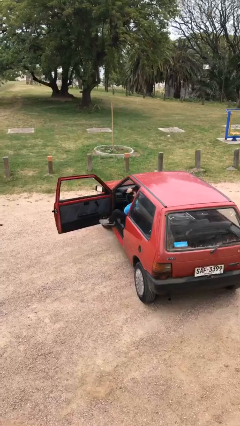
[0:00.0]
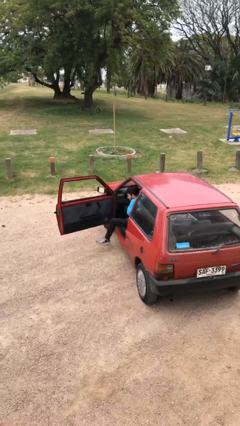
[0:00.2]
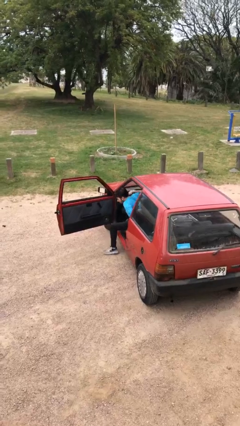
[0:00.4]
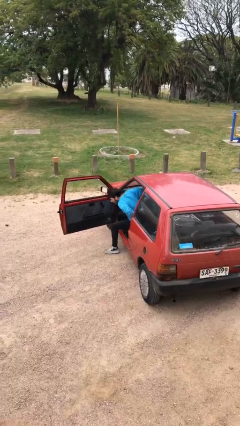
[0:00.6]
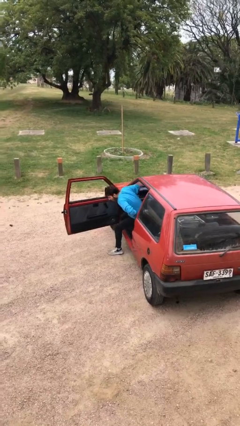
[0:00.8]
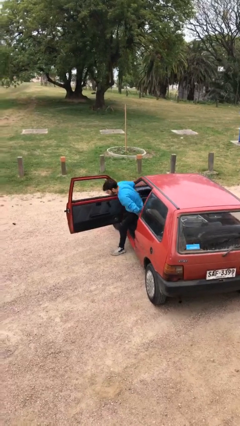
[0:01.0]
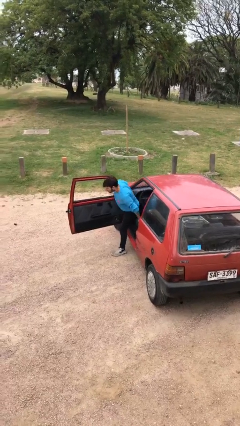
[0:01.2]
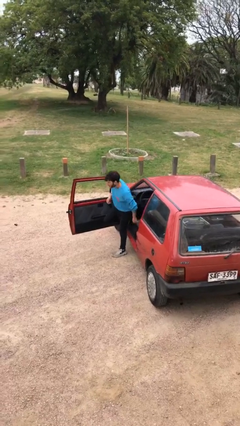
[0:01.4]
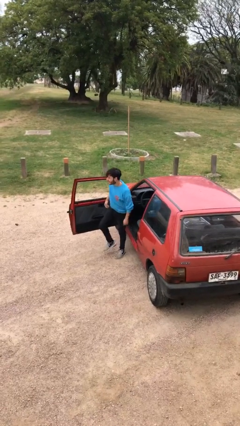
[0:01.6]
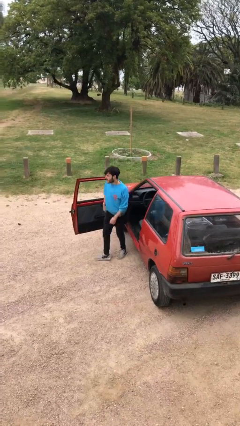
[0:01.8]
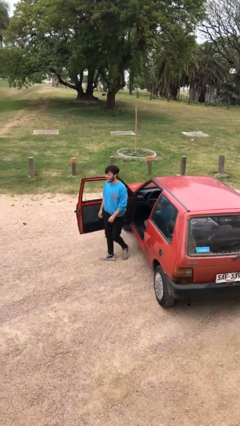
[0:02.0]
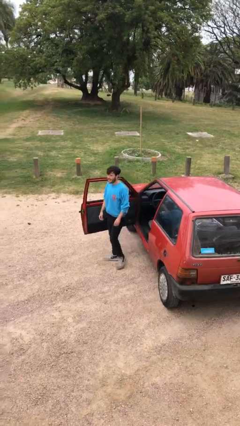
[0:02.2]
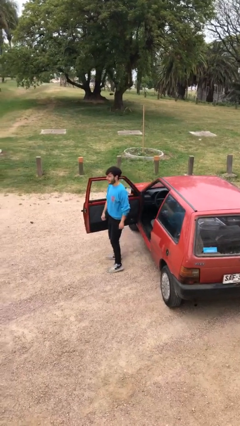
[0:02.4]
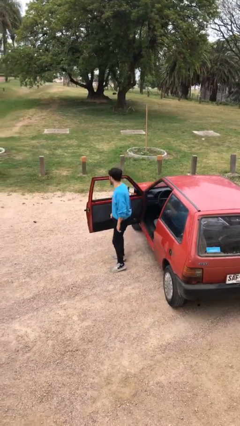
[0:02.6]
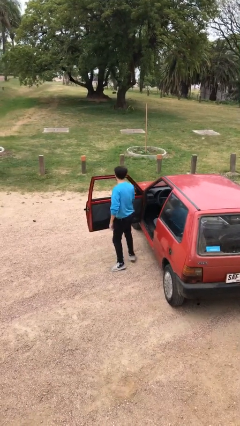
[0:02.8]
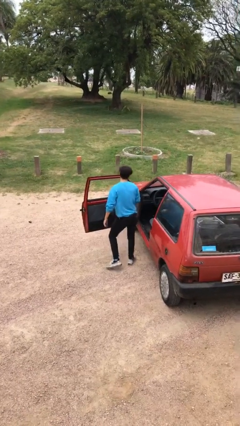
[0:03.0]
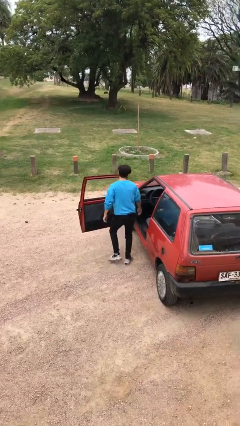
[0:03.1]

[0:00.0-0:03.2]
person exits car

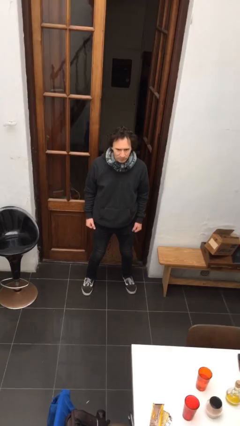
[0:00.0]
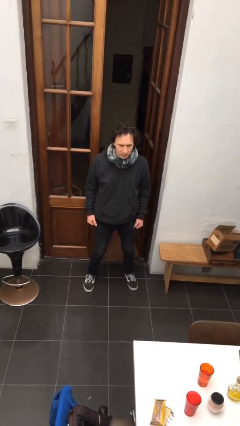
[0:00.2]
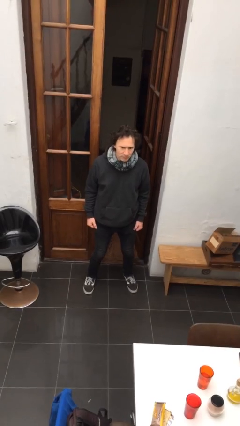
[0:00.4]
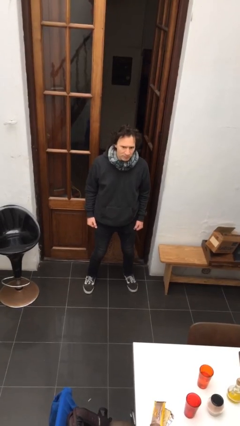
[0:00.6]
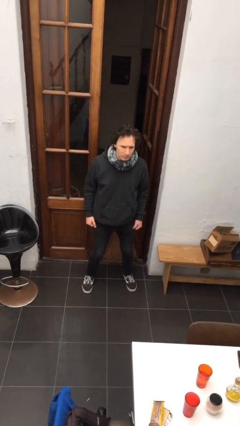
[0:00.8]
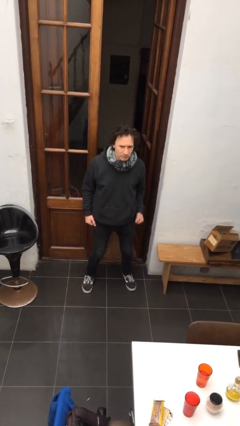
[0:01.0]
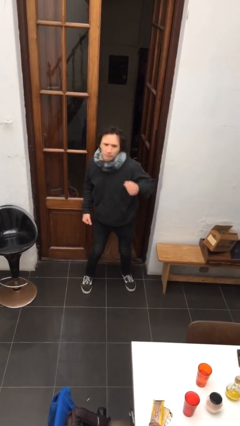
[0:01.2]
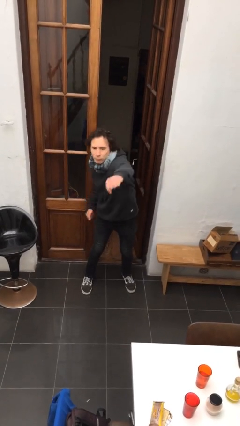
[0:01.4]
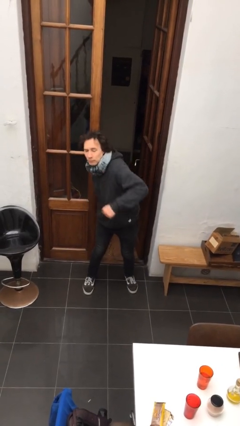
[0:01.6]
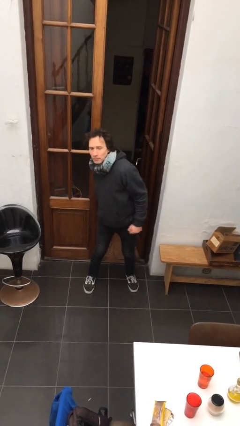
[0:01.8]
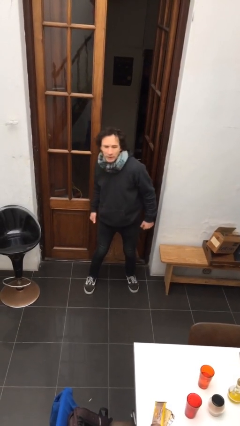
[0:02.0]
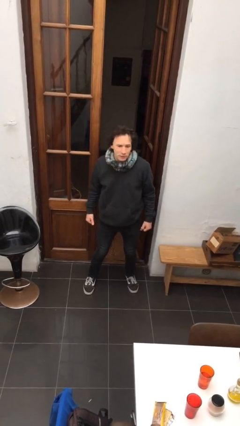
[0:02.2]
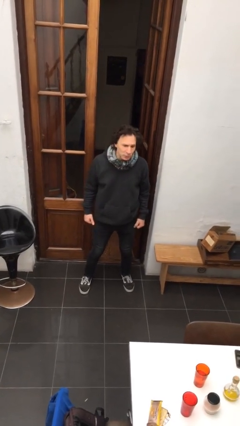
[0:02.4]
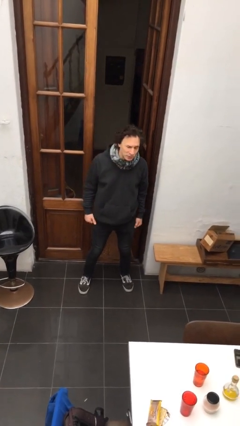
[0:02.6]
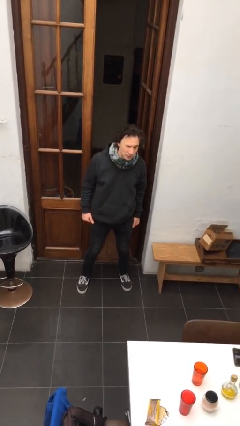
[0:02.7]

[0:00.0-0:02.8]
person punches

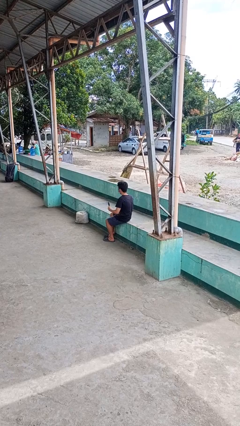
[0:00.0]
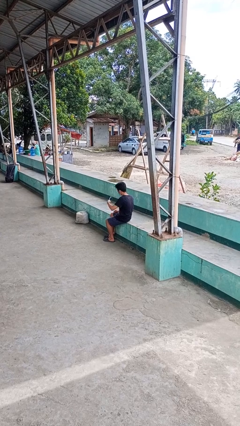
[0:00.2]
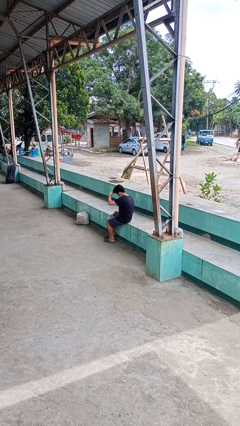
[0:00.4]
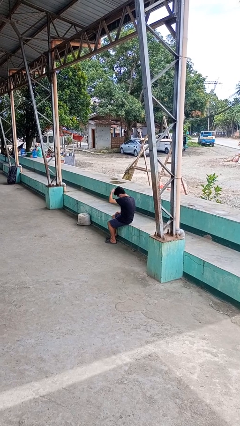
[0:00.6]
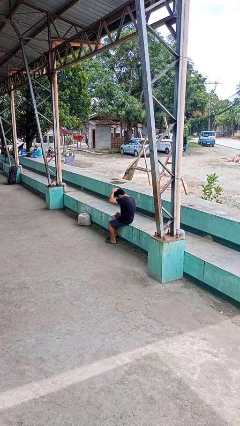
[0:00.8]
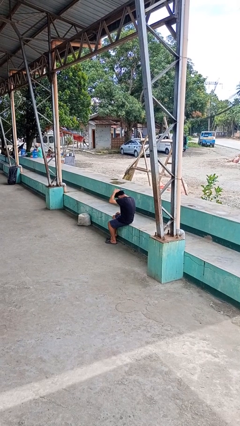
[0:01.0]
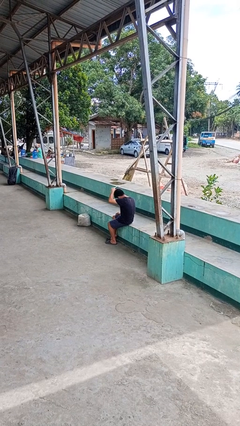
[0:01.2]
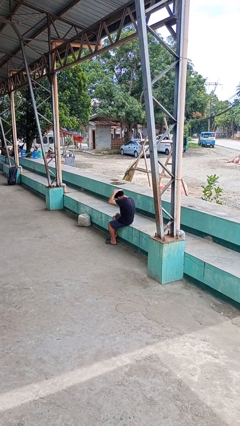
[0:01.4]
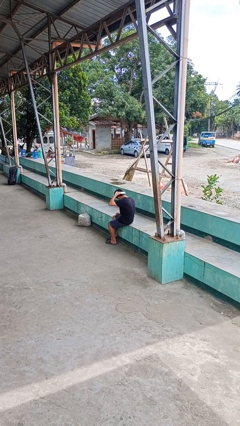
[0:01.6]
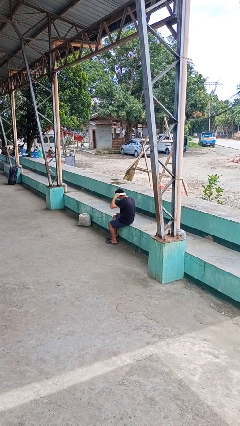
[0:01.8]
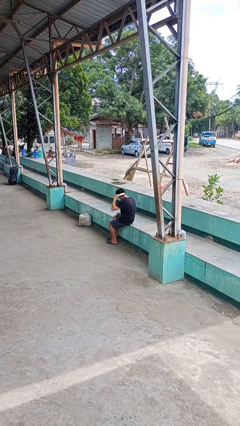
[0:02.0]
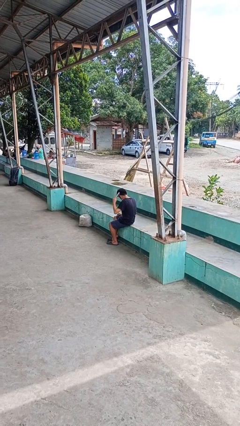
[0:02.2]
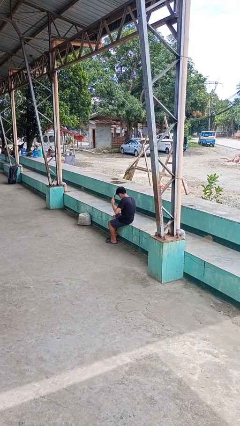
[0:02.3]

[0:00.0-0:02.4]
person brushes hair

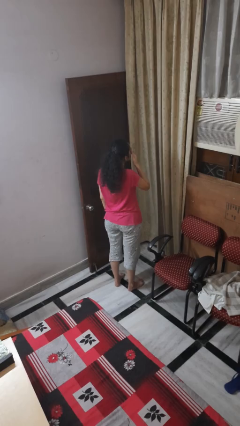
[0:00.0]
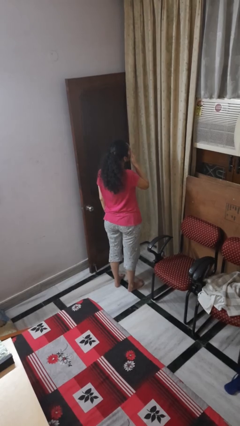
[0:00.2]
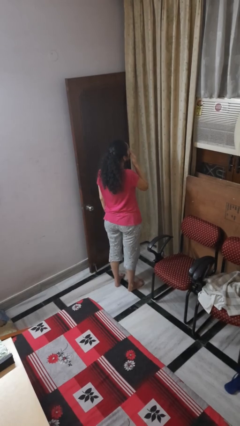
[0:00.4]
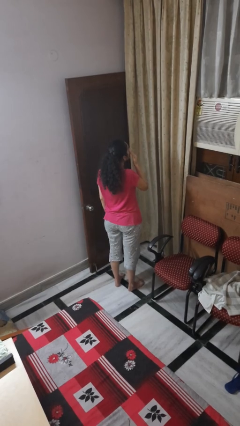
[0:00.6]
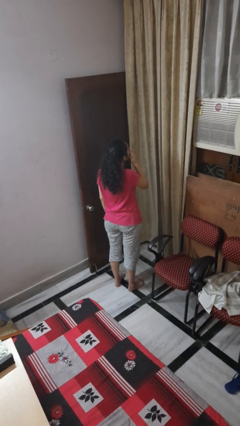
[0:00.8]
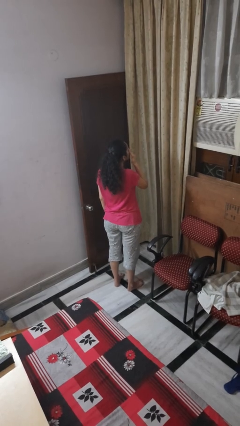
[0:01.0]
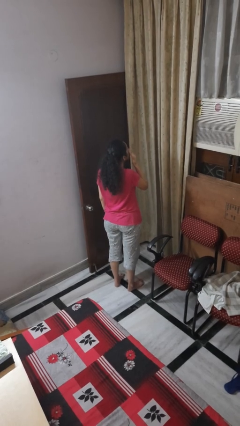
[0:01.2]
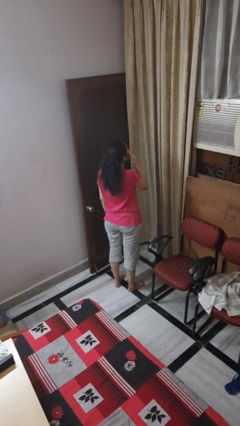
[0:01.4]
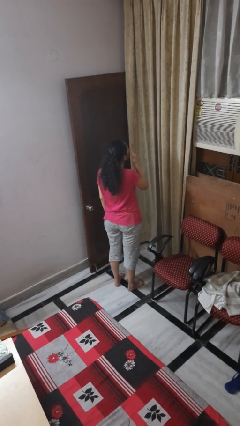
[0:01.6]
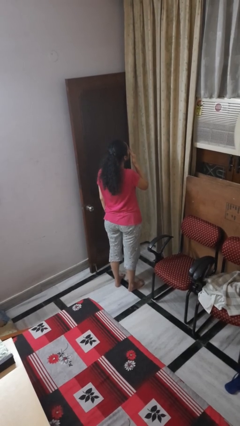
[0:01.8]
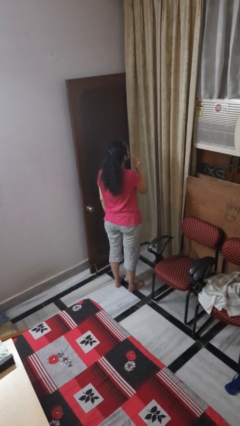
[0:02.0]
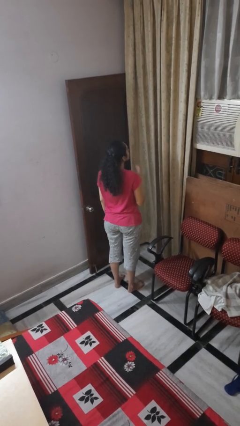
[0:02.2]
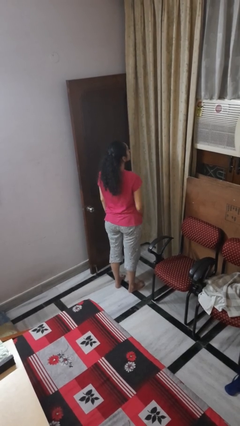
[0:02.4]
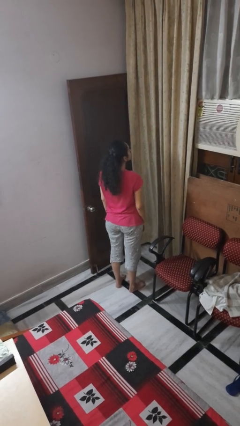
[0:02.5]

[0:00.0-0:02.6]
person rubs eyes

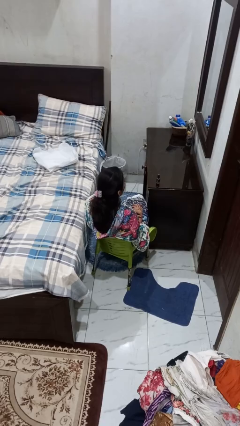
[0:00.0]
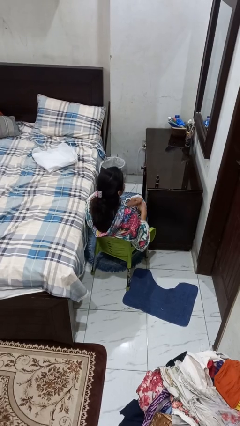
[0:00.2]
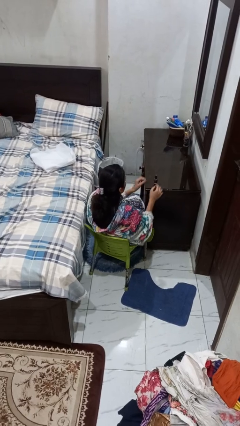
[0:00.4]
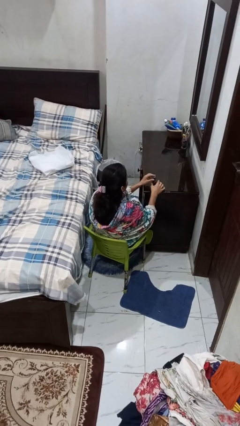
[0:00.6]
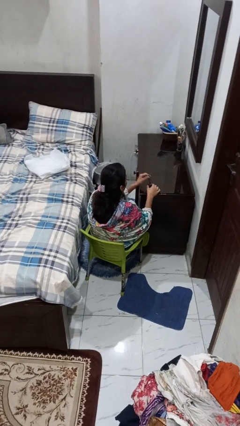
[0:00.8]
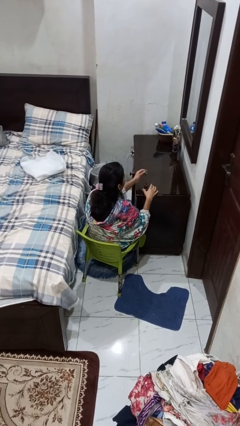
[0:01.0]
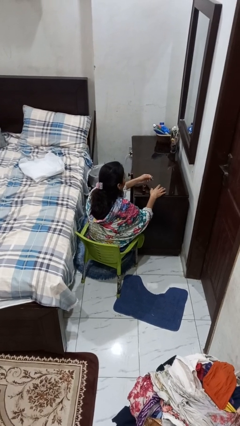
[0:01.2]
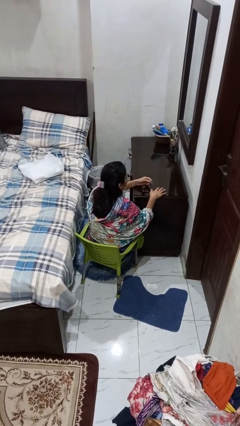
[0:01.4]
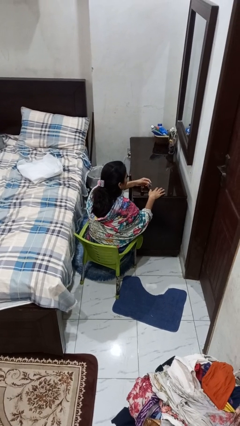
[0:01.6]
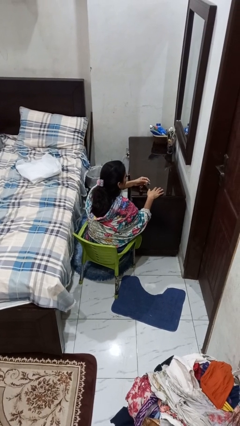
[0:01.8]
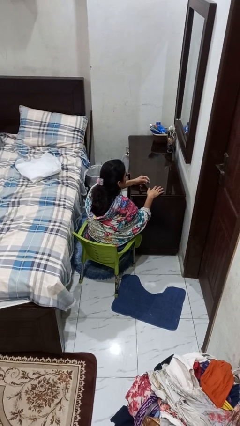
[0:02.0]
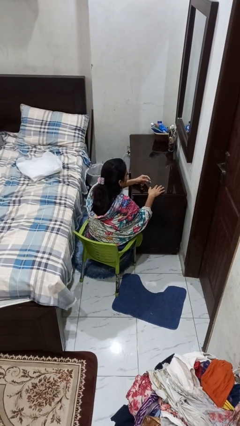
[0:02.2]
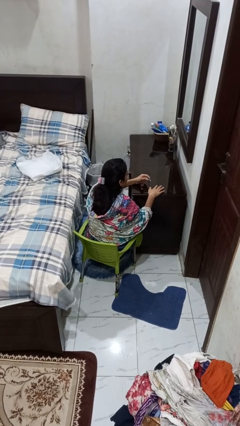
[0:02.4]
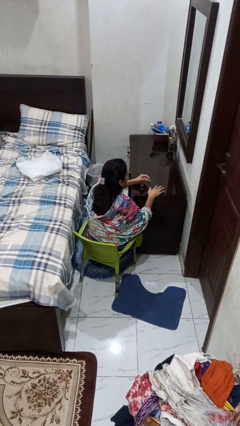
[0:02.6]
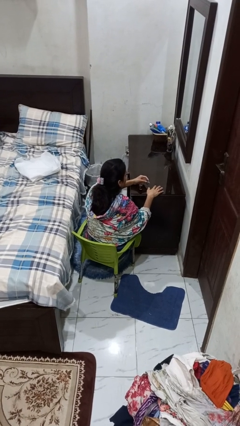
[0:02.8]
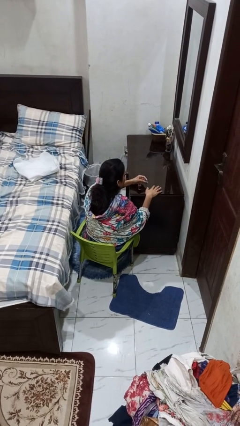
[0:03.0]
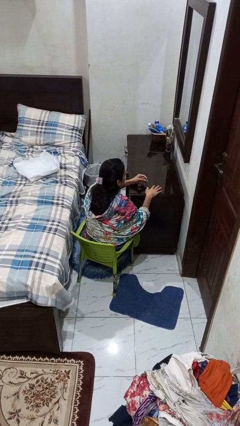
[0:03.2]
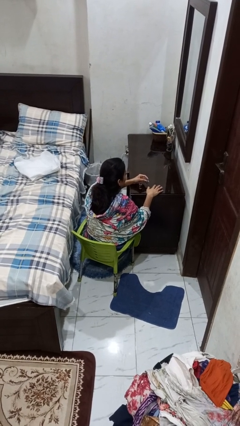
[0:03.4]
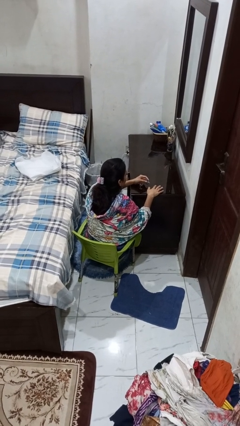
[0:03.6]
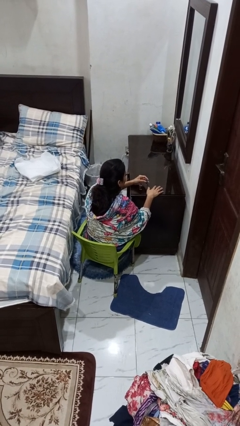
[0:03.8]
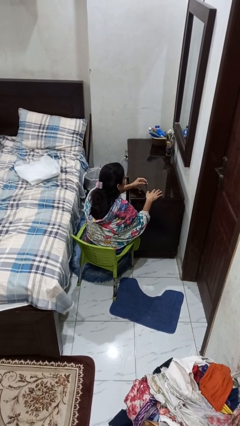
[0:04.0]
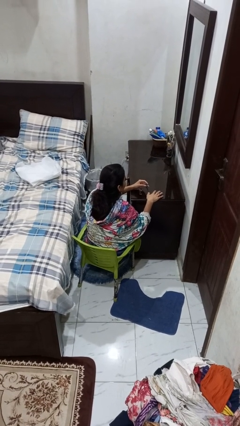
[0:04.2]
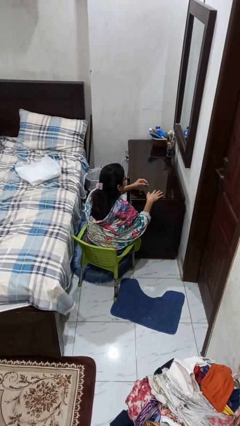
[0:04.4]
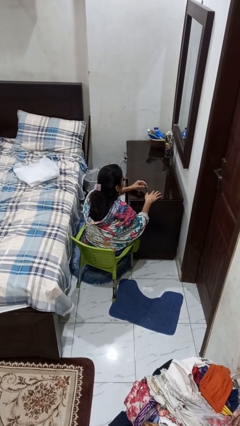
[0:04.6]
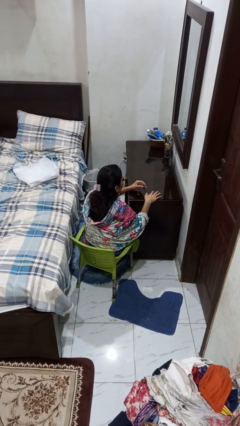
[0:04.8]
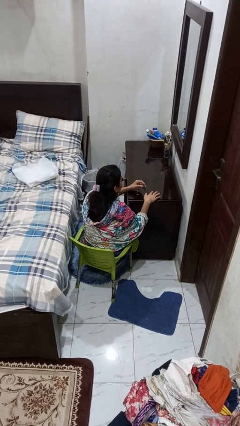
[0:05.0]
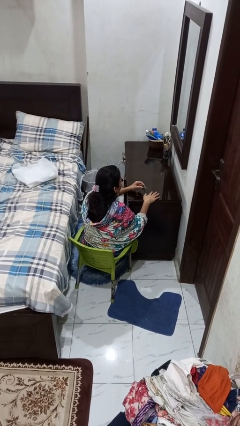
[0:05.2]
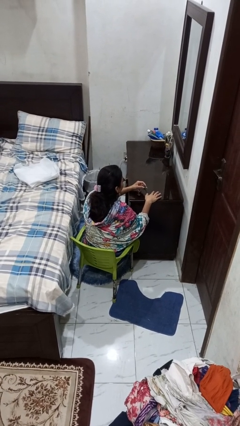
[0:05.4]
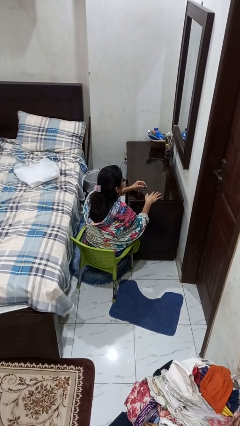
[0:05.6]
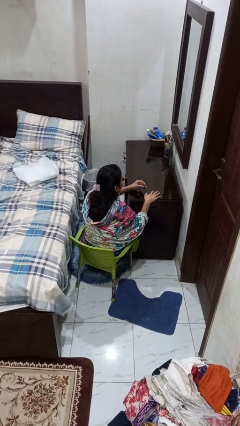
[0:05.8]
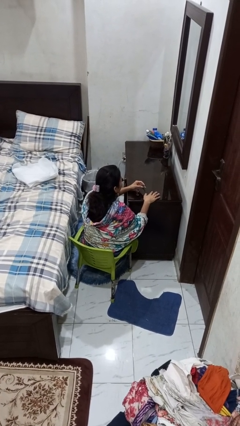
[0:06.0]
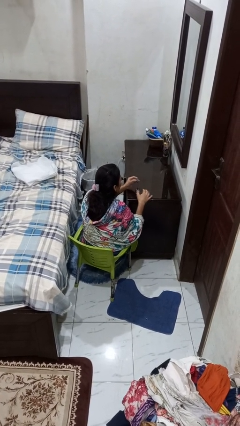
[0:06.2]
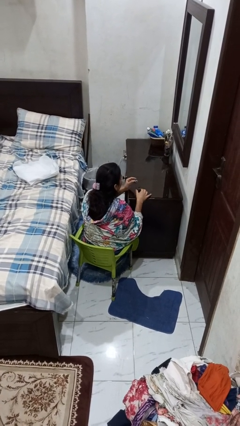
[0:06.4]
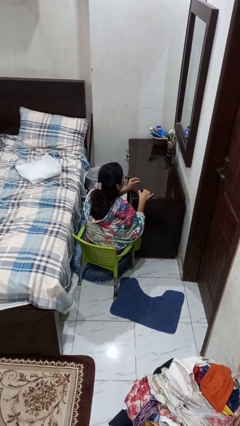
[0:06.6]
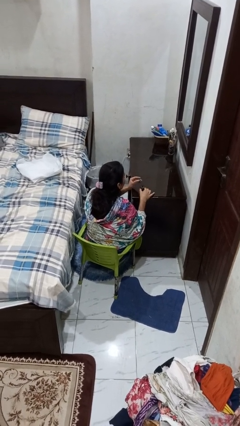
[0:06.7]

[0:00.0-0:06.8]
person paints fingernails

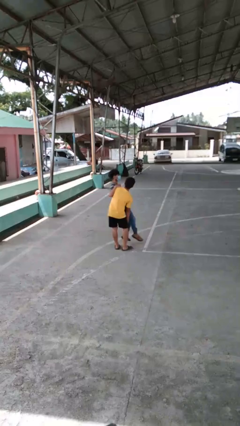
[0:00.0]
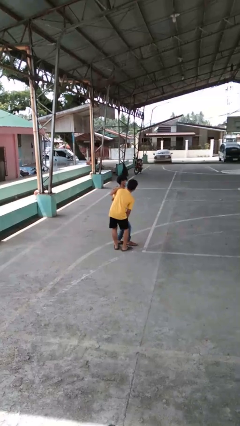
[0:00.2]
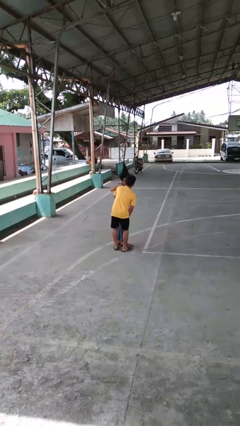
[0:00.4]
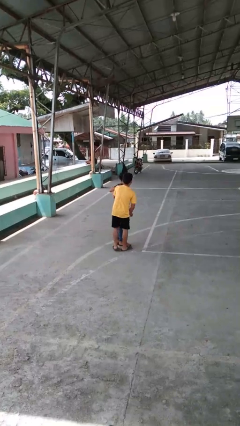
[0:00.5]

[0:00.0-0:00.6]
person puts down person
